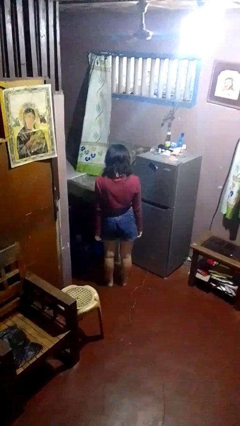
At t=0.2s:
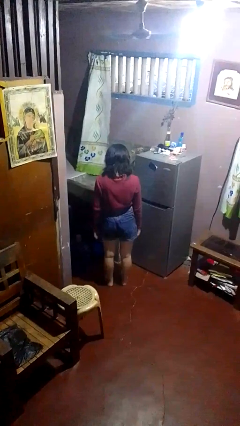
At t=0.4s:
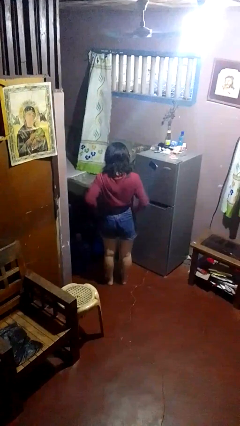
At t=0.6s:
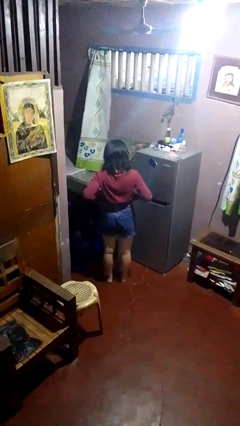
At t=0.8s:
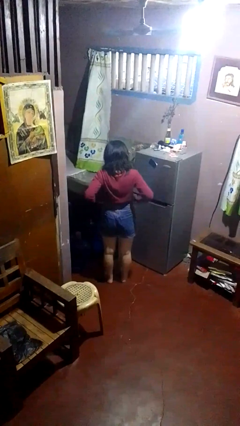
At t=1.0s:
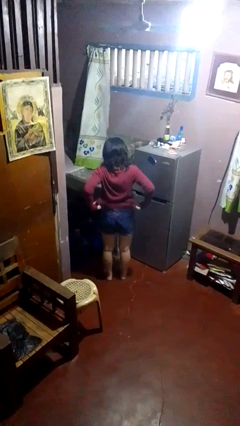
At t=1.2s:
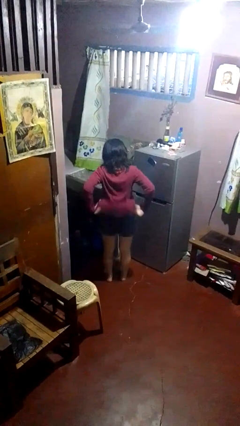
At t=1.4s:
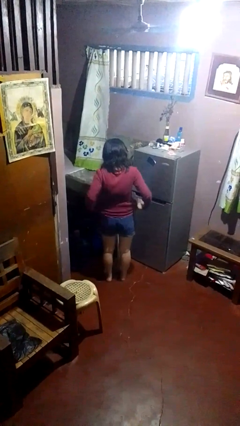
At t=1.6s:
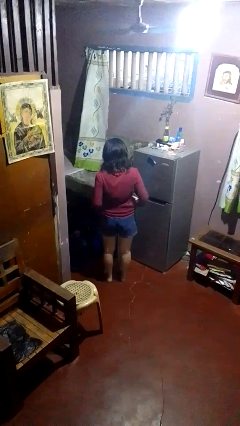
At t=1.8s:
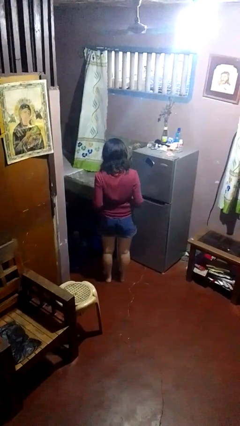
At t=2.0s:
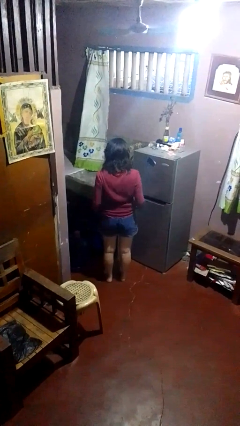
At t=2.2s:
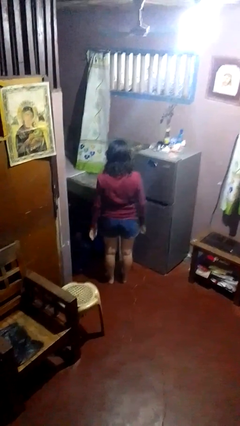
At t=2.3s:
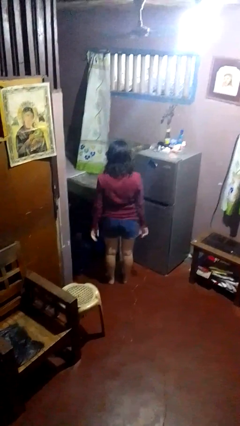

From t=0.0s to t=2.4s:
person untucks shirt

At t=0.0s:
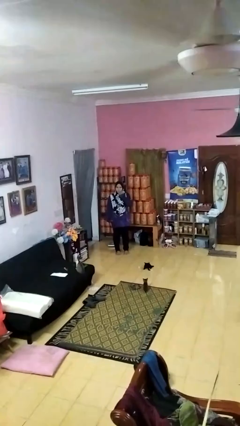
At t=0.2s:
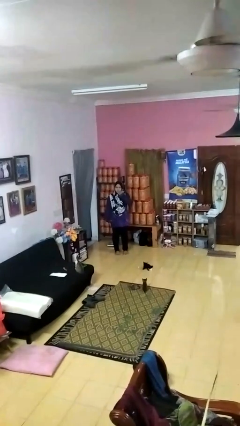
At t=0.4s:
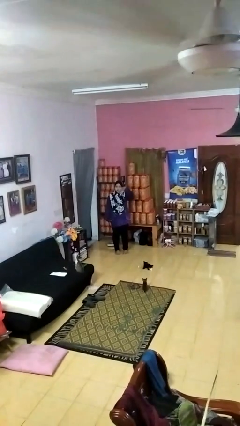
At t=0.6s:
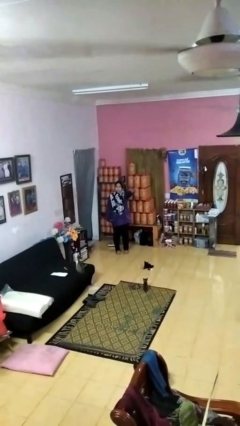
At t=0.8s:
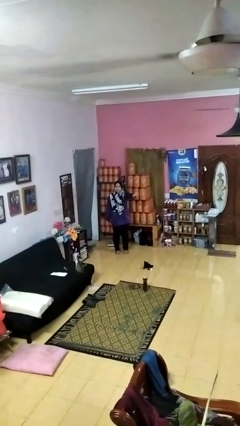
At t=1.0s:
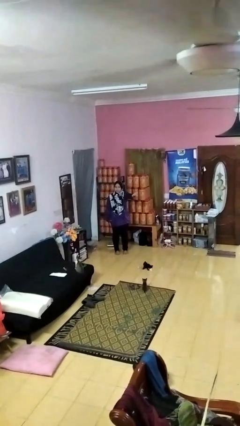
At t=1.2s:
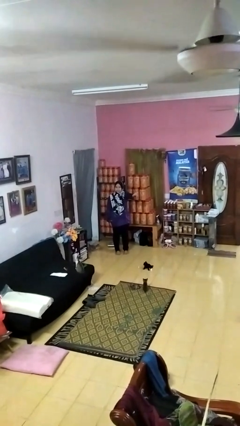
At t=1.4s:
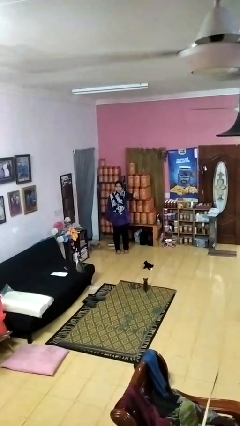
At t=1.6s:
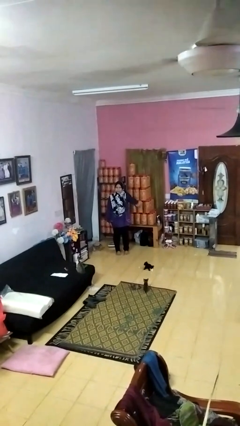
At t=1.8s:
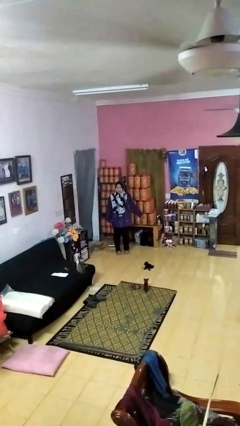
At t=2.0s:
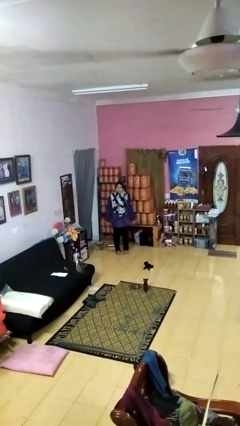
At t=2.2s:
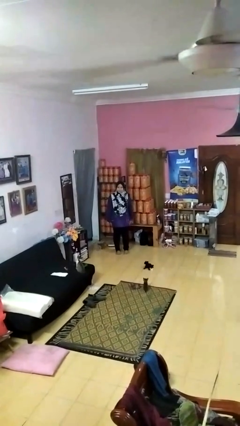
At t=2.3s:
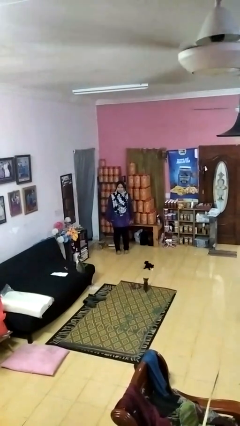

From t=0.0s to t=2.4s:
person gestures blow kiss

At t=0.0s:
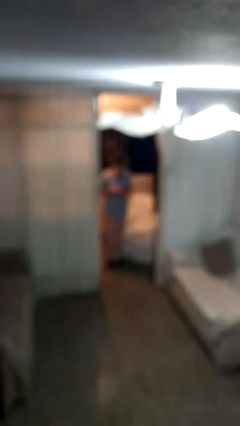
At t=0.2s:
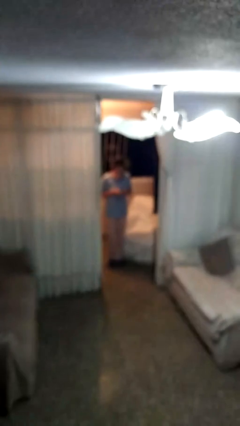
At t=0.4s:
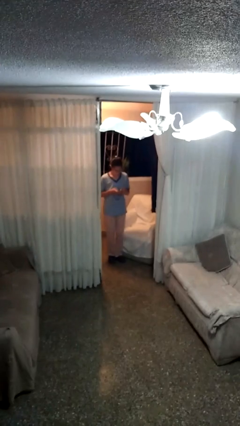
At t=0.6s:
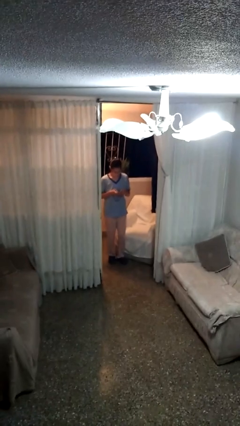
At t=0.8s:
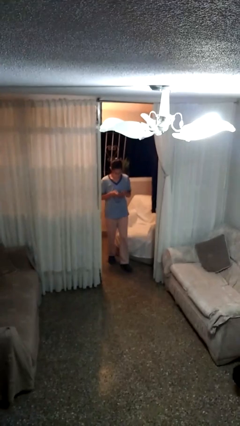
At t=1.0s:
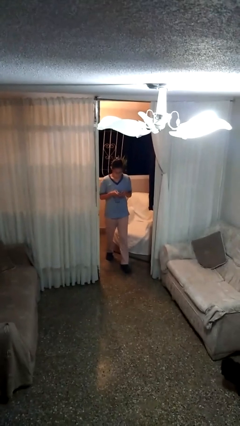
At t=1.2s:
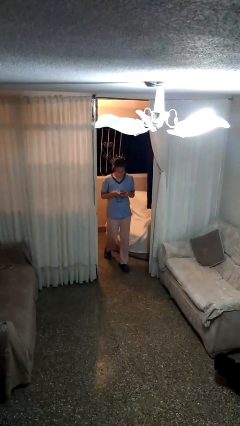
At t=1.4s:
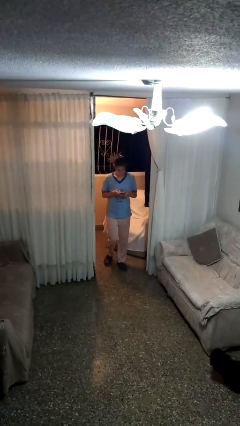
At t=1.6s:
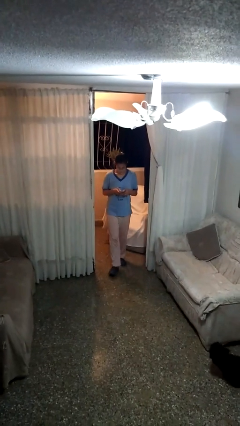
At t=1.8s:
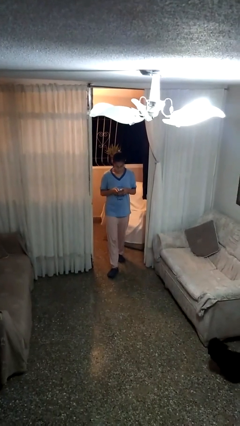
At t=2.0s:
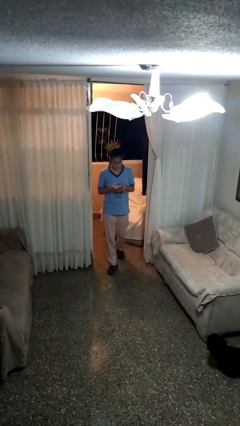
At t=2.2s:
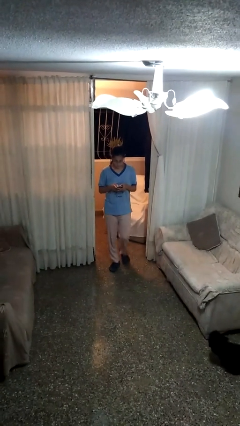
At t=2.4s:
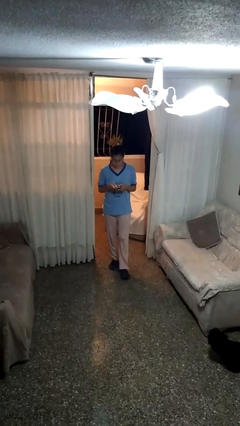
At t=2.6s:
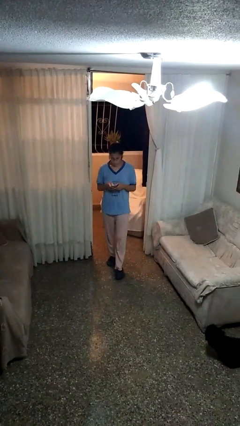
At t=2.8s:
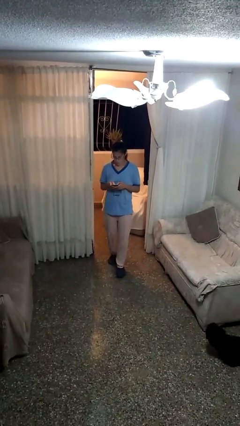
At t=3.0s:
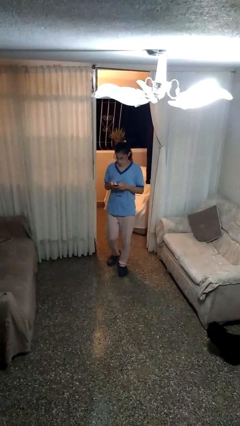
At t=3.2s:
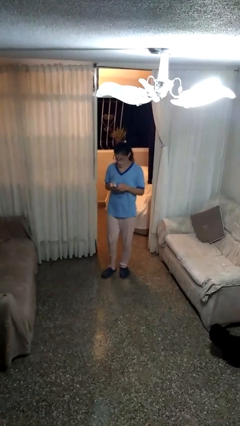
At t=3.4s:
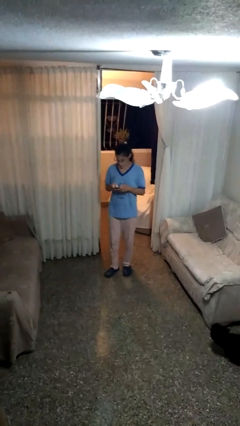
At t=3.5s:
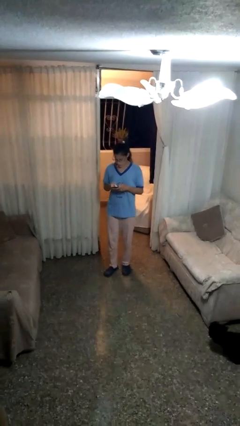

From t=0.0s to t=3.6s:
person enters scene through structure

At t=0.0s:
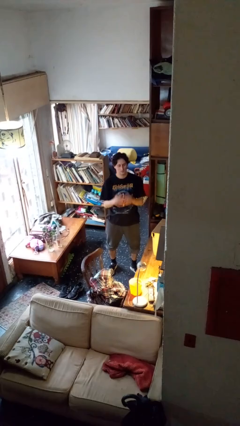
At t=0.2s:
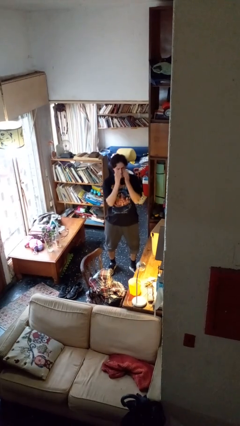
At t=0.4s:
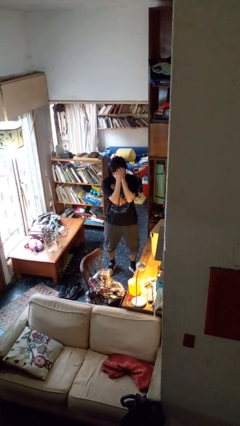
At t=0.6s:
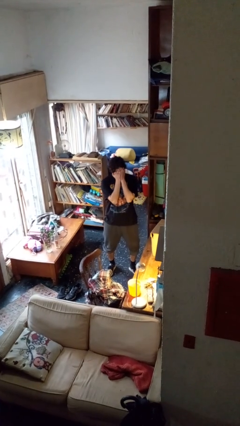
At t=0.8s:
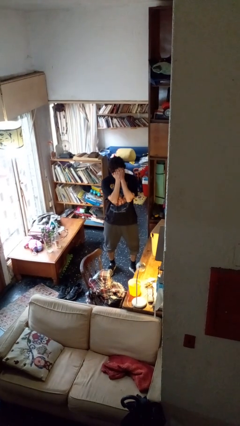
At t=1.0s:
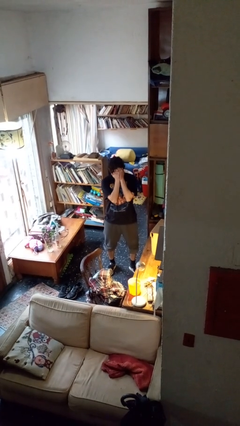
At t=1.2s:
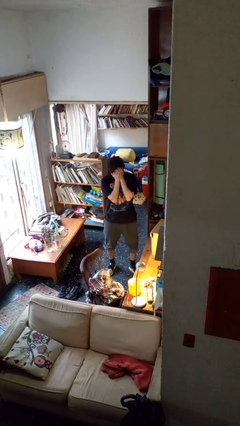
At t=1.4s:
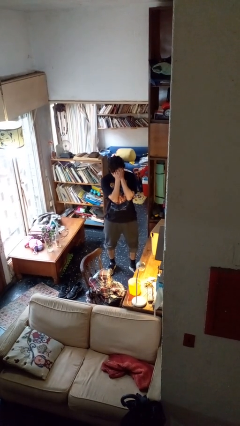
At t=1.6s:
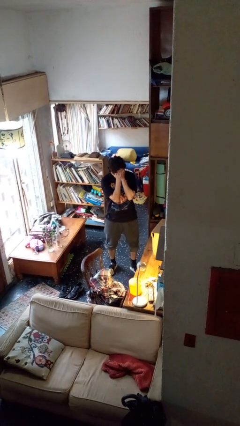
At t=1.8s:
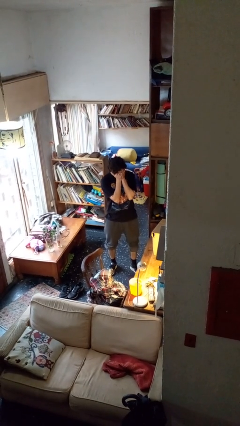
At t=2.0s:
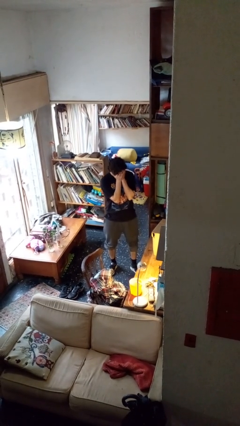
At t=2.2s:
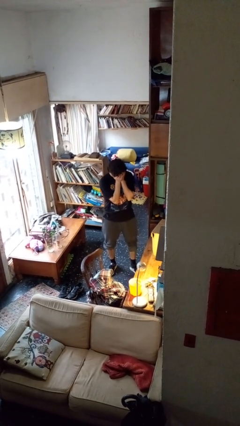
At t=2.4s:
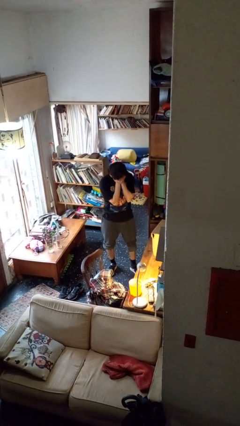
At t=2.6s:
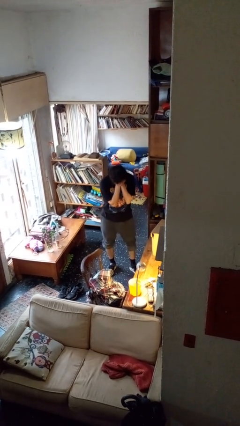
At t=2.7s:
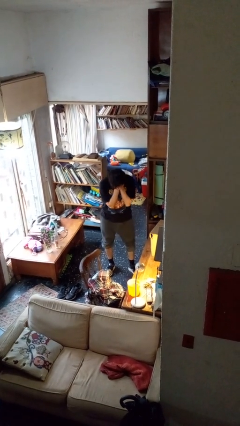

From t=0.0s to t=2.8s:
person covers face with hands

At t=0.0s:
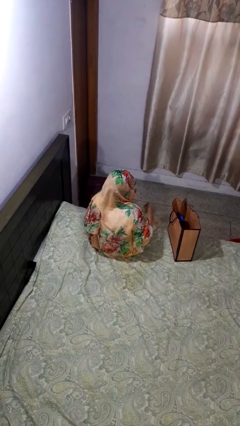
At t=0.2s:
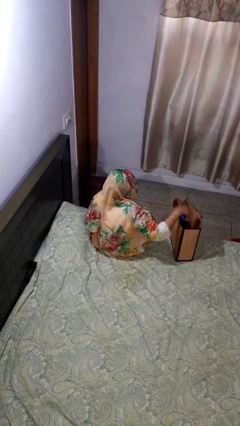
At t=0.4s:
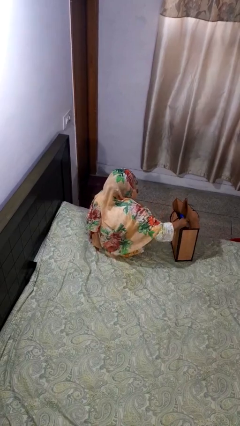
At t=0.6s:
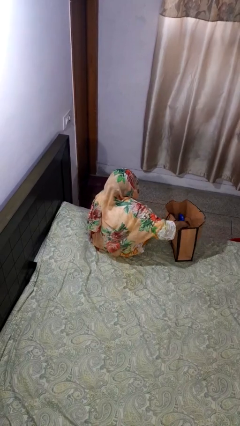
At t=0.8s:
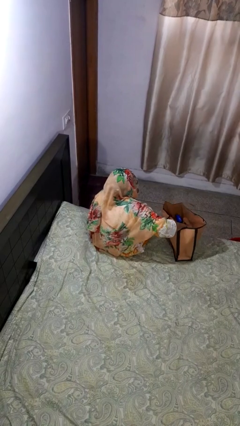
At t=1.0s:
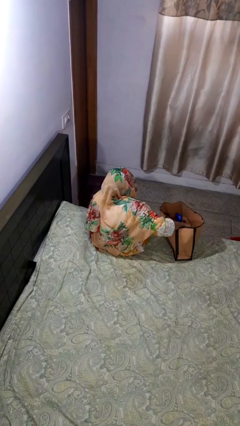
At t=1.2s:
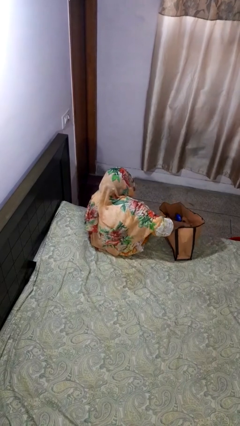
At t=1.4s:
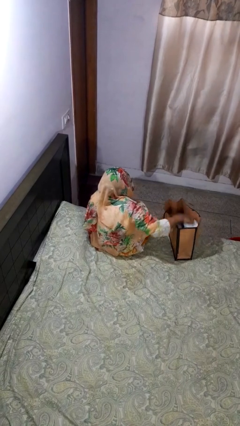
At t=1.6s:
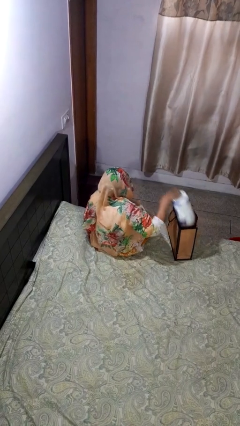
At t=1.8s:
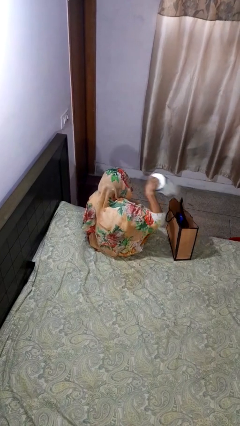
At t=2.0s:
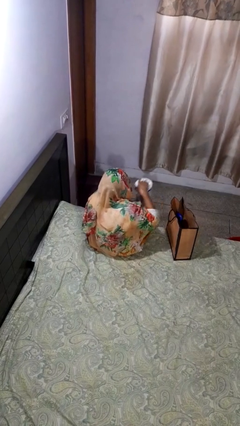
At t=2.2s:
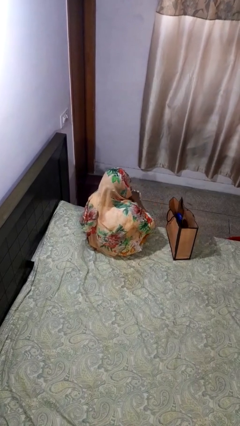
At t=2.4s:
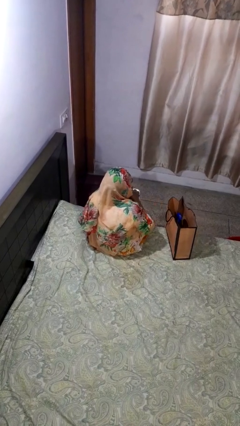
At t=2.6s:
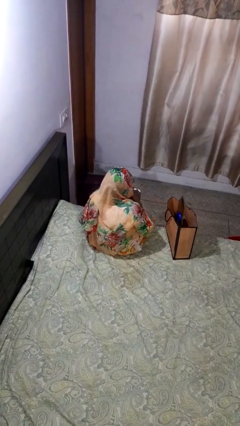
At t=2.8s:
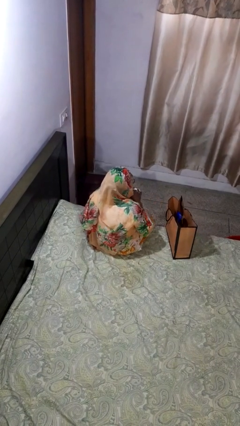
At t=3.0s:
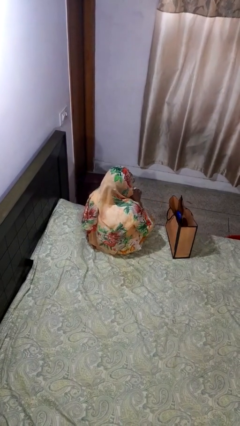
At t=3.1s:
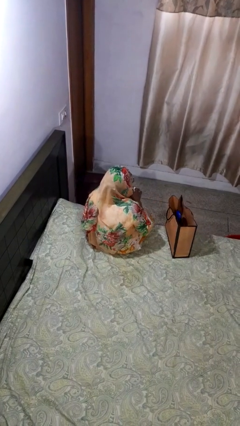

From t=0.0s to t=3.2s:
person takes object from bag

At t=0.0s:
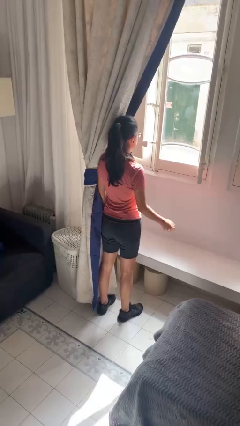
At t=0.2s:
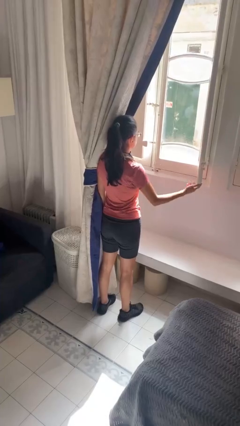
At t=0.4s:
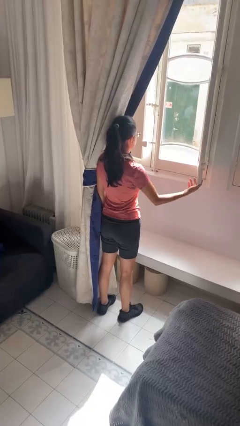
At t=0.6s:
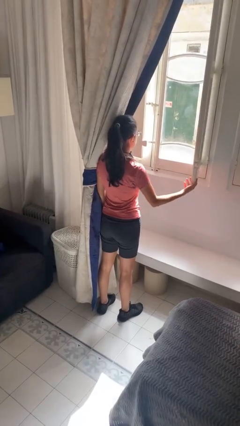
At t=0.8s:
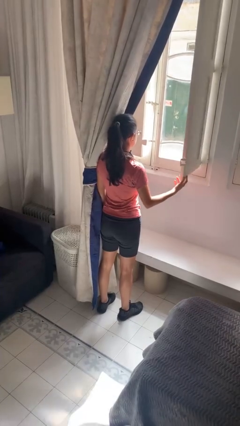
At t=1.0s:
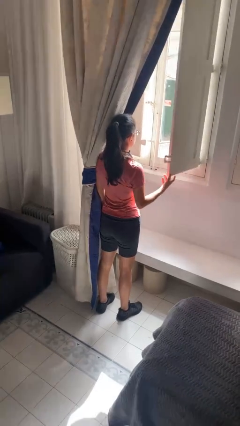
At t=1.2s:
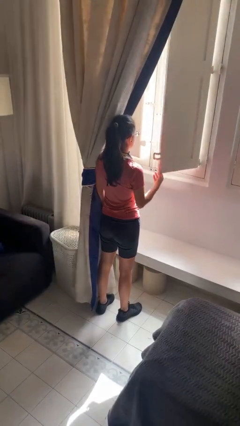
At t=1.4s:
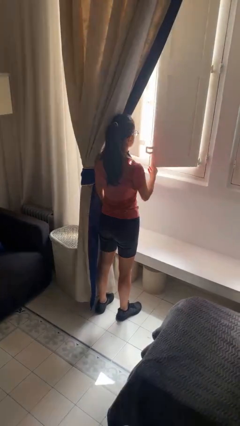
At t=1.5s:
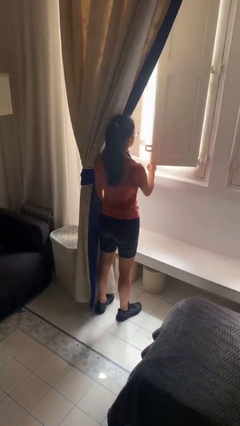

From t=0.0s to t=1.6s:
person closes home window

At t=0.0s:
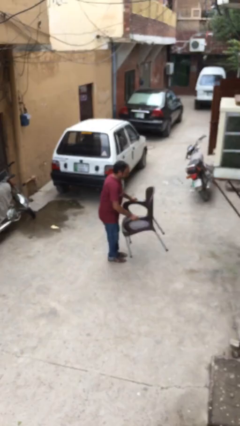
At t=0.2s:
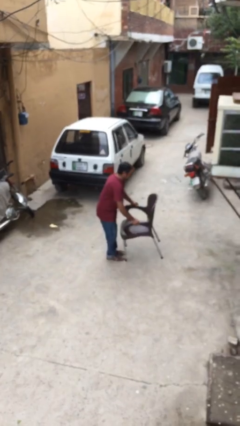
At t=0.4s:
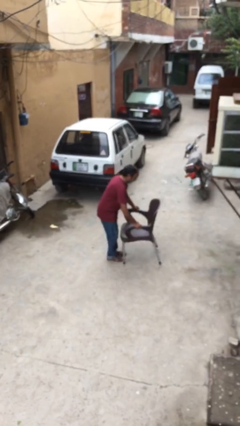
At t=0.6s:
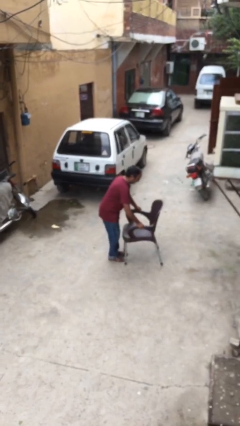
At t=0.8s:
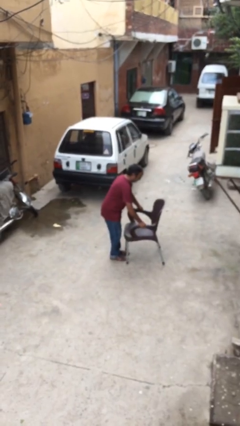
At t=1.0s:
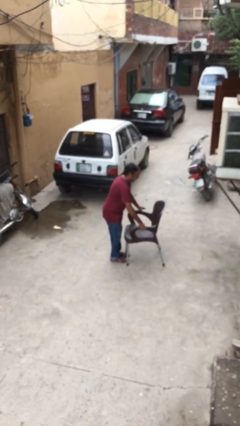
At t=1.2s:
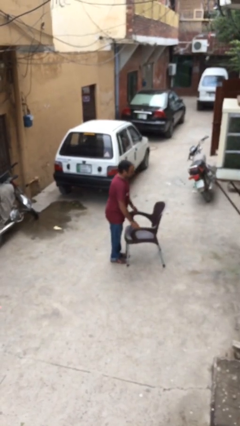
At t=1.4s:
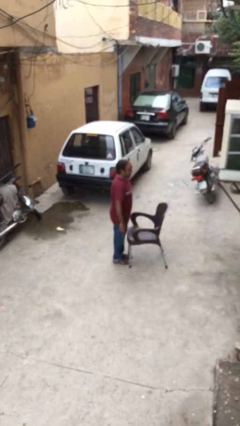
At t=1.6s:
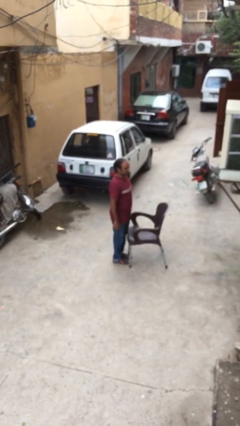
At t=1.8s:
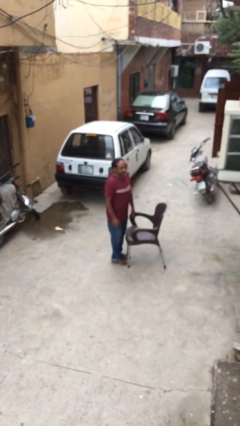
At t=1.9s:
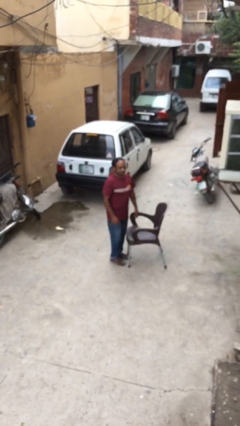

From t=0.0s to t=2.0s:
person puts down object on floor
